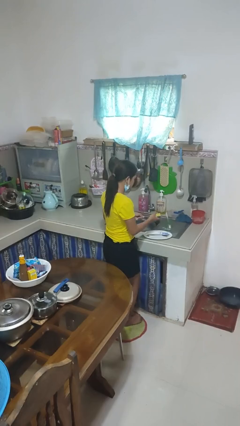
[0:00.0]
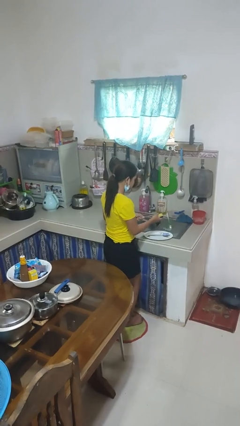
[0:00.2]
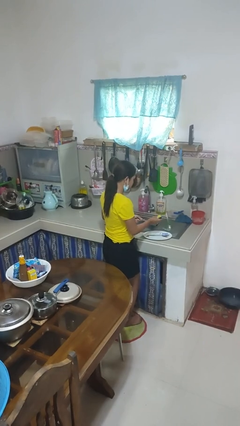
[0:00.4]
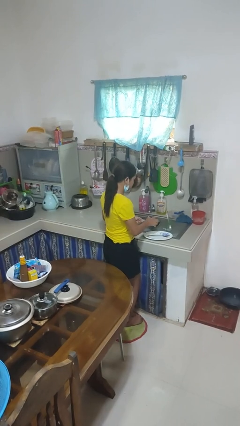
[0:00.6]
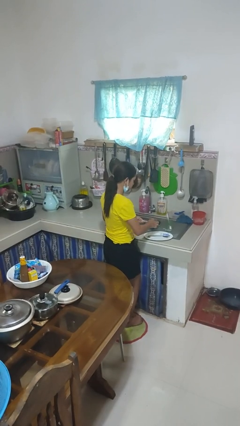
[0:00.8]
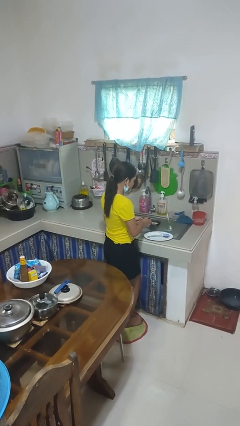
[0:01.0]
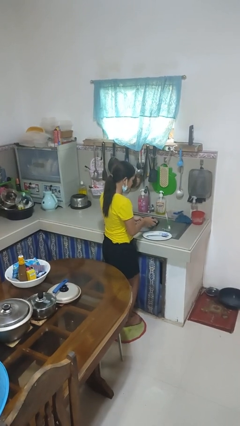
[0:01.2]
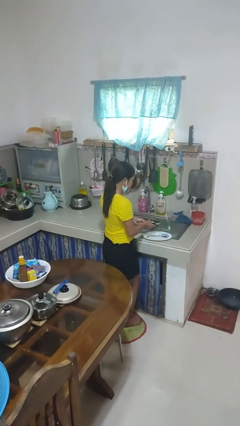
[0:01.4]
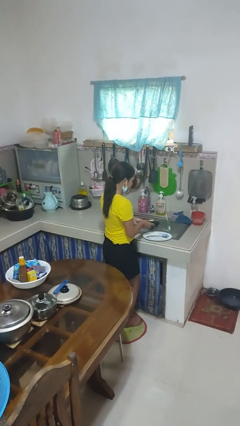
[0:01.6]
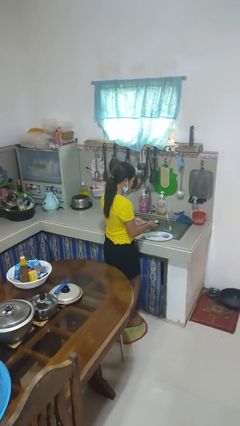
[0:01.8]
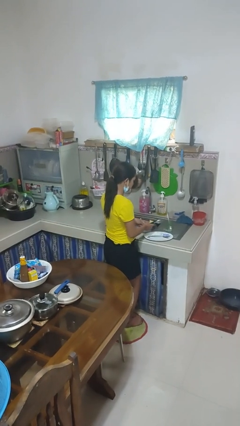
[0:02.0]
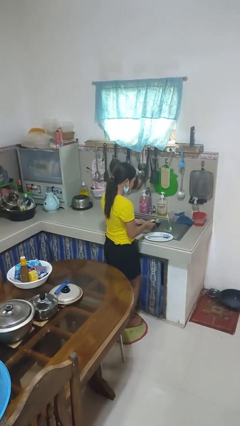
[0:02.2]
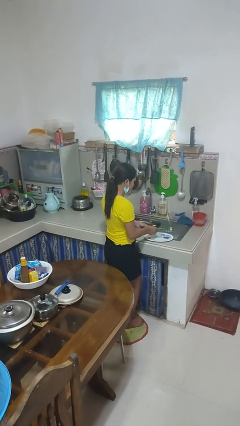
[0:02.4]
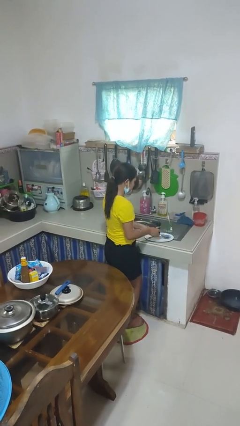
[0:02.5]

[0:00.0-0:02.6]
person washes dish

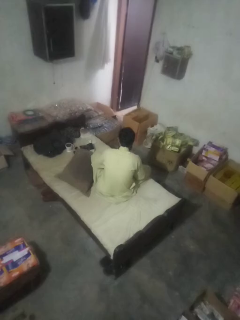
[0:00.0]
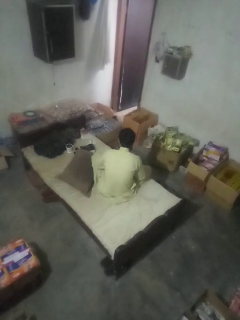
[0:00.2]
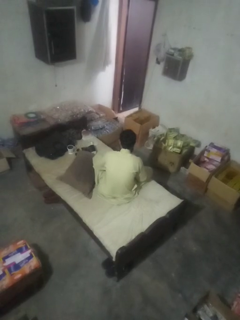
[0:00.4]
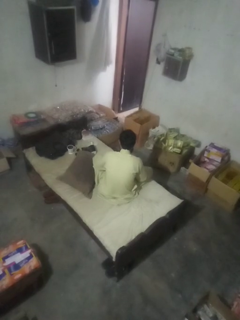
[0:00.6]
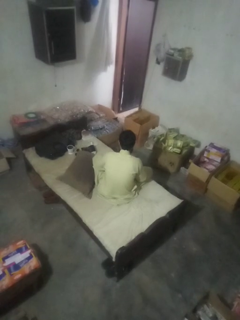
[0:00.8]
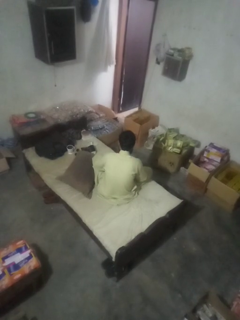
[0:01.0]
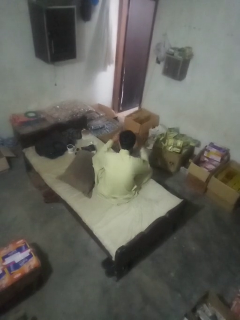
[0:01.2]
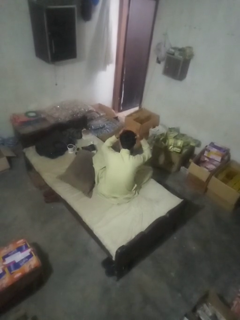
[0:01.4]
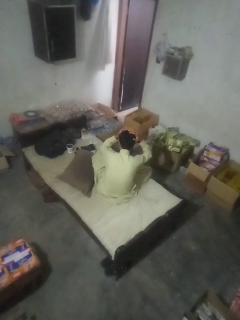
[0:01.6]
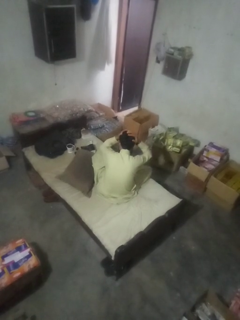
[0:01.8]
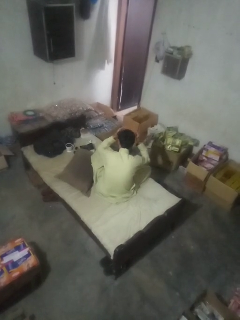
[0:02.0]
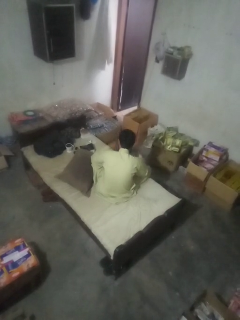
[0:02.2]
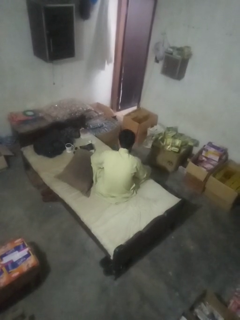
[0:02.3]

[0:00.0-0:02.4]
person pats head

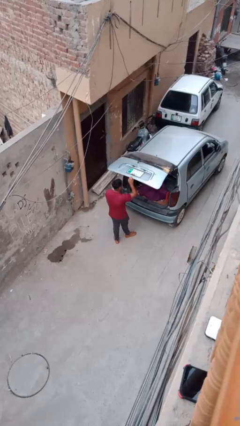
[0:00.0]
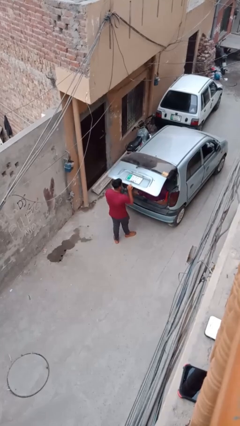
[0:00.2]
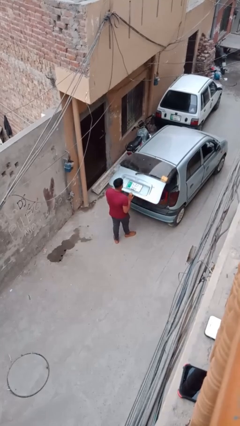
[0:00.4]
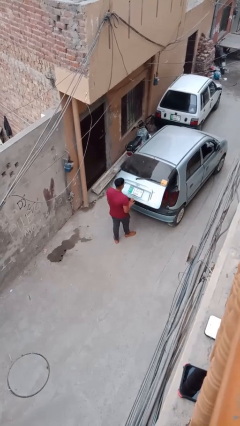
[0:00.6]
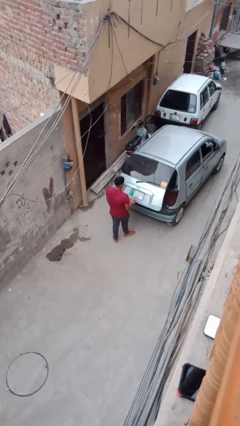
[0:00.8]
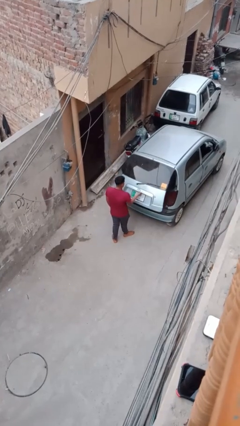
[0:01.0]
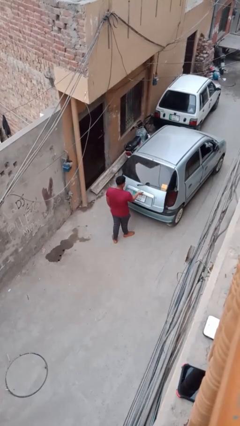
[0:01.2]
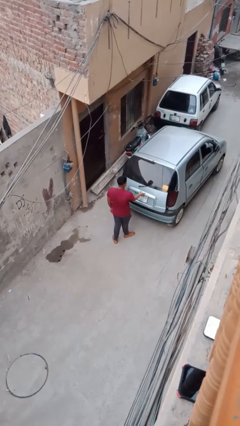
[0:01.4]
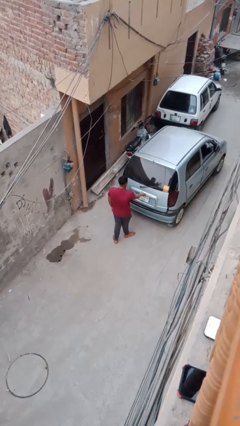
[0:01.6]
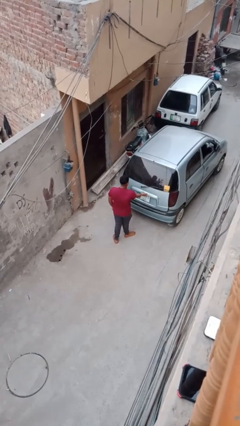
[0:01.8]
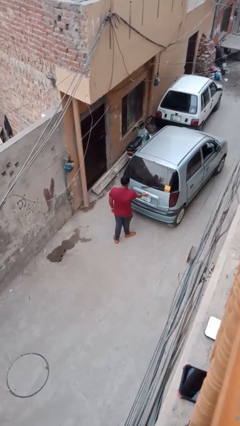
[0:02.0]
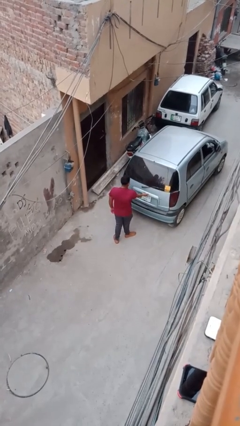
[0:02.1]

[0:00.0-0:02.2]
person closes car trunk

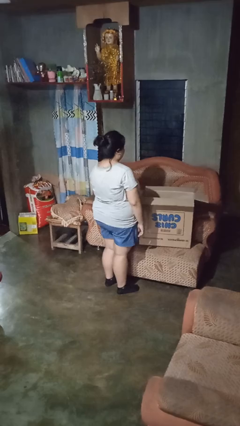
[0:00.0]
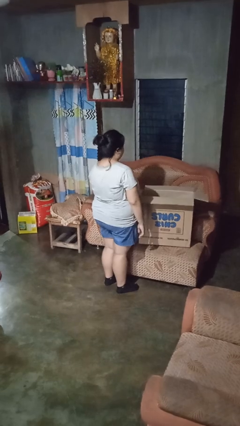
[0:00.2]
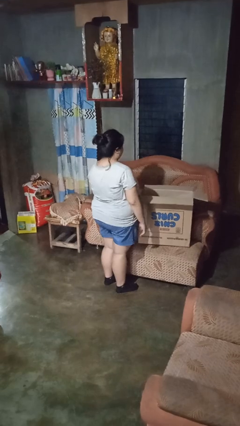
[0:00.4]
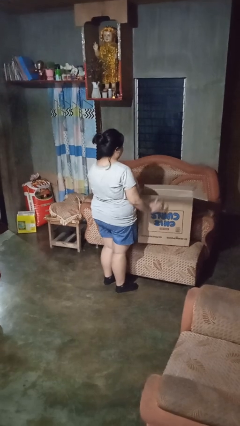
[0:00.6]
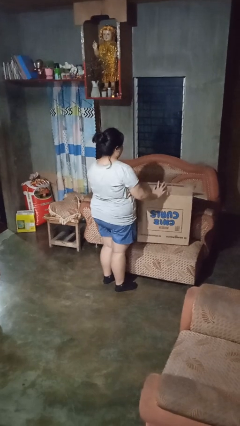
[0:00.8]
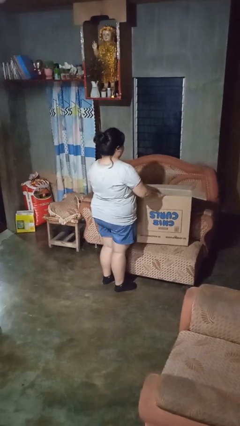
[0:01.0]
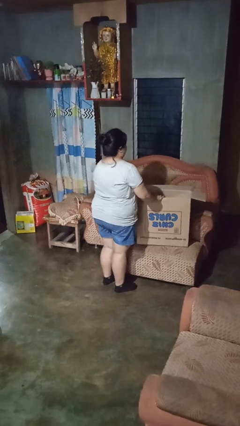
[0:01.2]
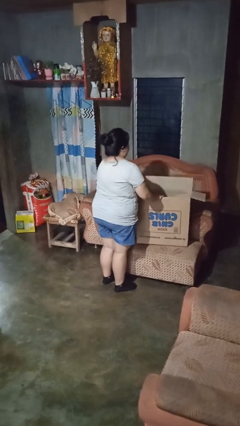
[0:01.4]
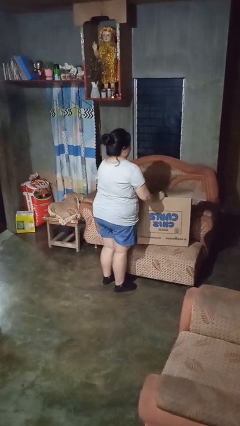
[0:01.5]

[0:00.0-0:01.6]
person closes box

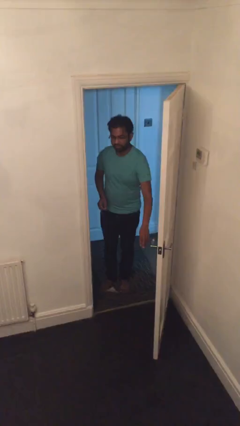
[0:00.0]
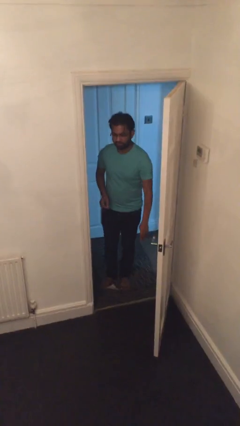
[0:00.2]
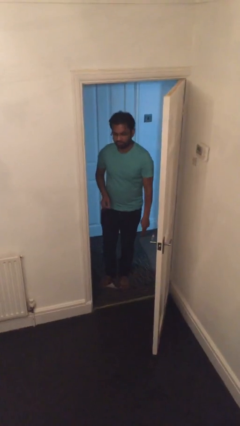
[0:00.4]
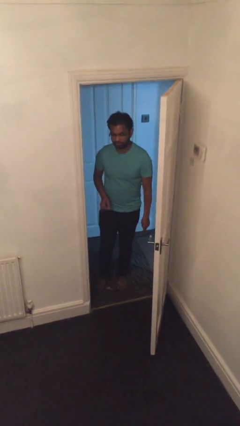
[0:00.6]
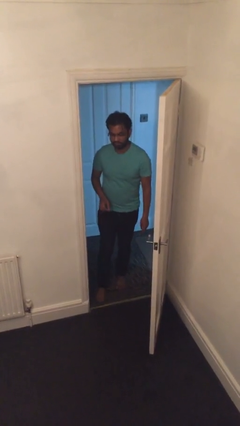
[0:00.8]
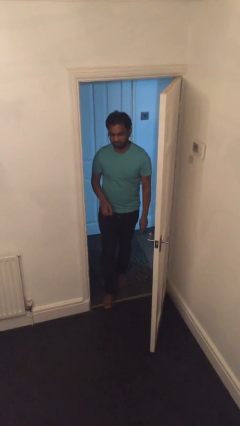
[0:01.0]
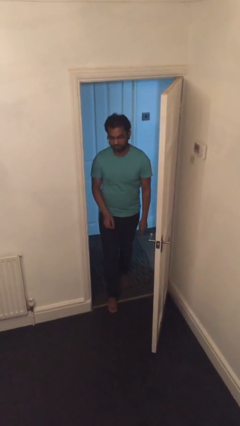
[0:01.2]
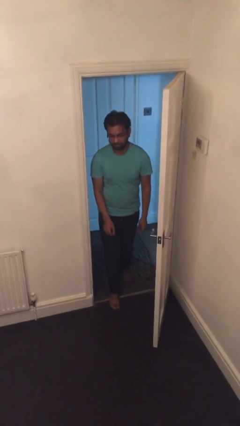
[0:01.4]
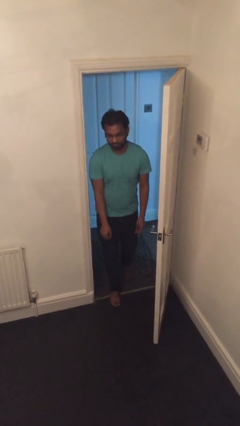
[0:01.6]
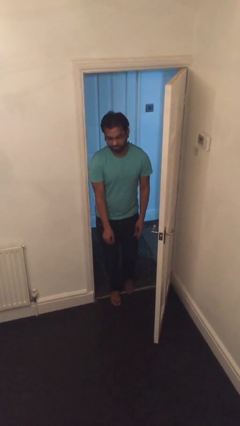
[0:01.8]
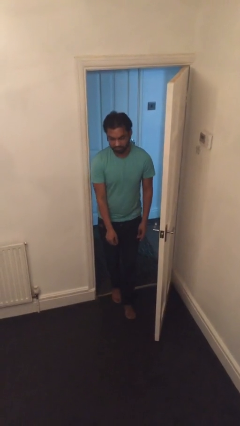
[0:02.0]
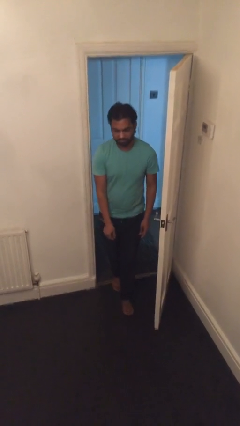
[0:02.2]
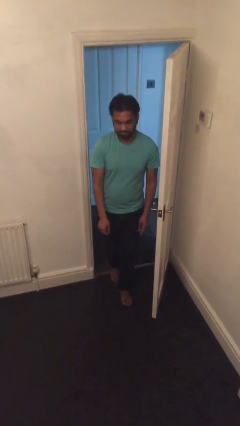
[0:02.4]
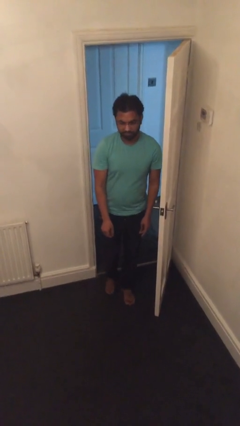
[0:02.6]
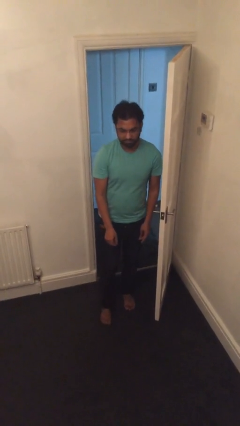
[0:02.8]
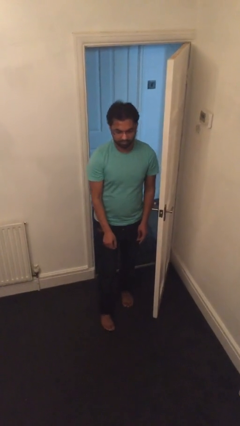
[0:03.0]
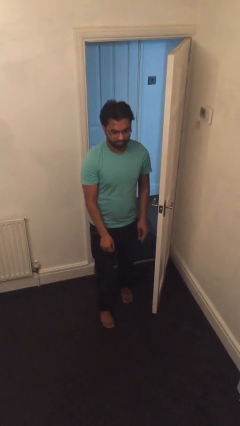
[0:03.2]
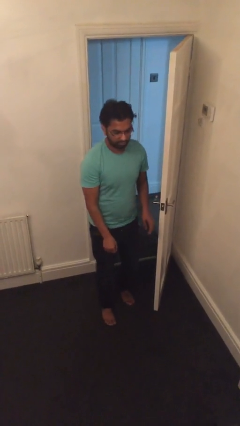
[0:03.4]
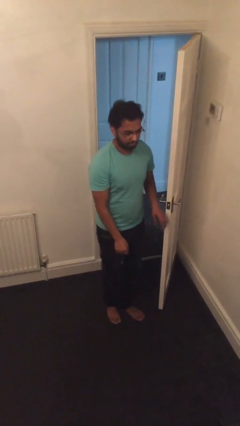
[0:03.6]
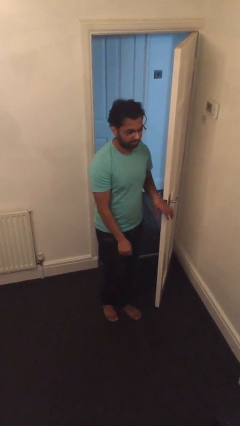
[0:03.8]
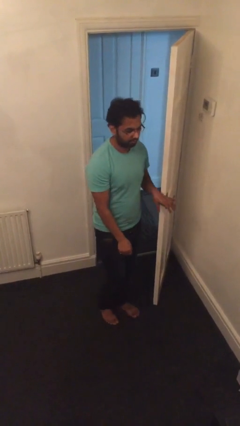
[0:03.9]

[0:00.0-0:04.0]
person enters scene through structure

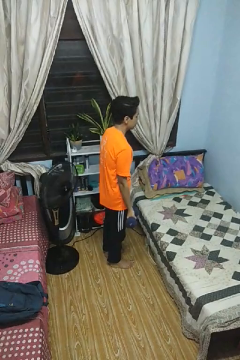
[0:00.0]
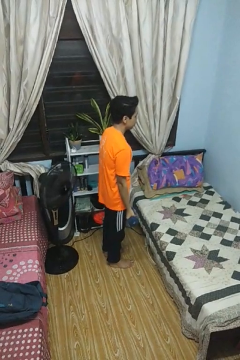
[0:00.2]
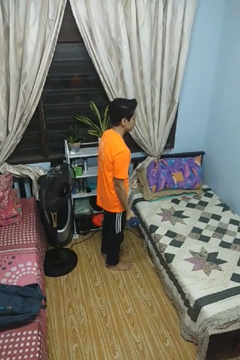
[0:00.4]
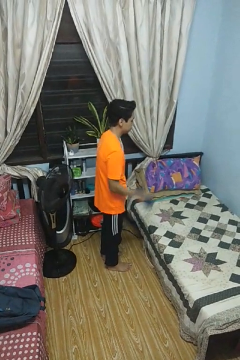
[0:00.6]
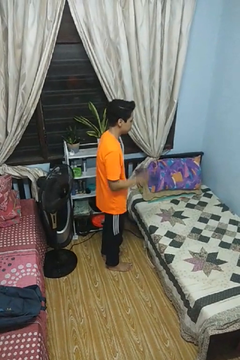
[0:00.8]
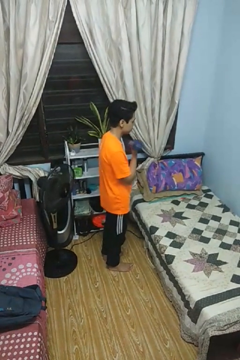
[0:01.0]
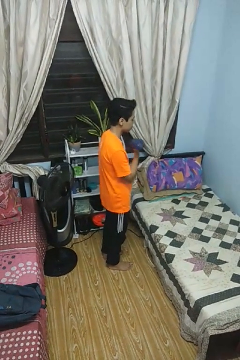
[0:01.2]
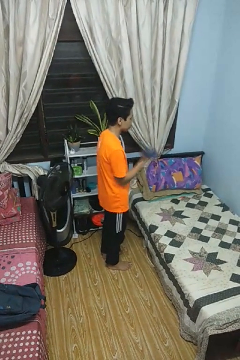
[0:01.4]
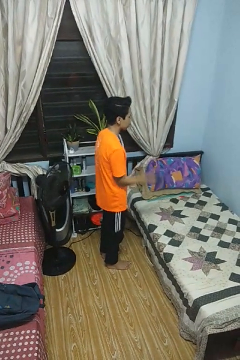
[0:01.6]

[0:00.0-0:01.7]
person lifts dumbbells

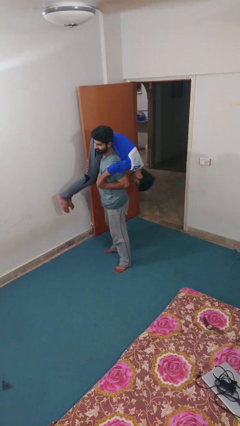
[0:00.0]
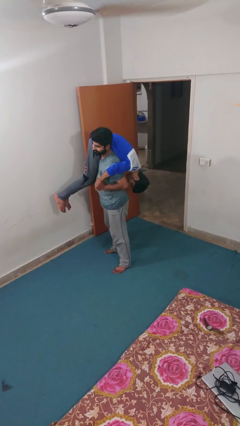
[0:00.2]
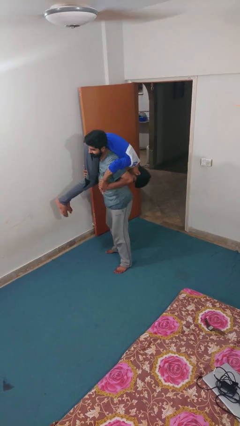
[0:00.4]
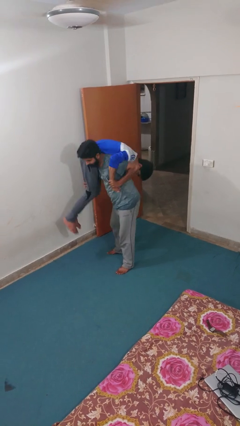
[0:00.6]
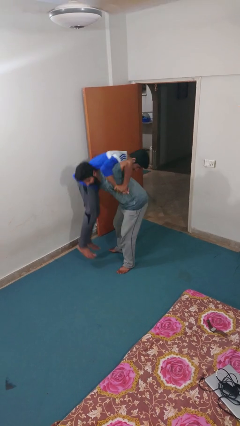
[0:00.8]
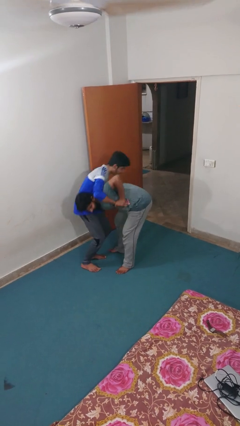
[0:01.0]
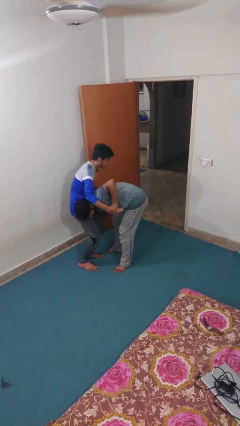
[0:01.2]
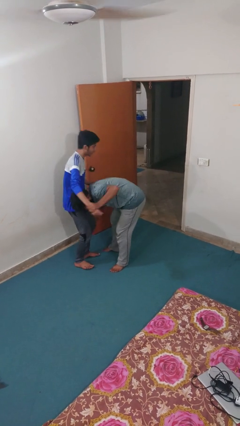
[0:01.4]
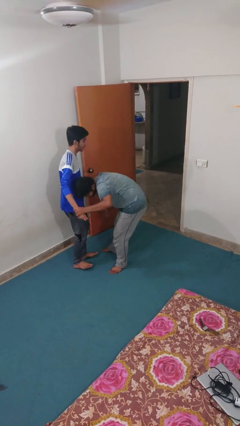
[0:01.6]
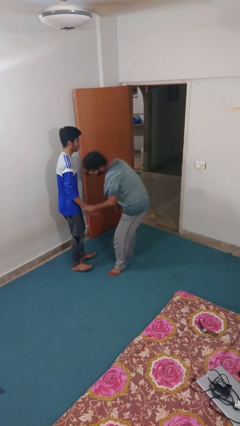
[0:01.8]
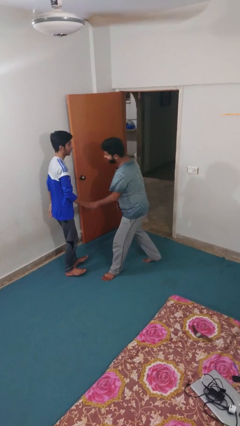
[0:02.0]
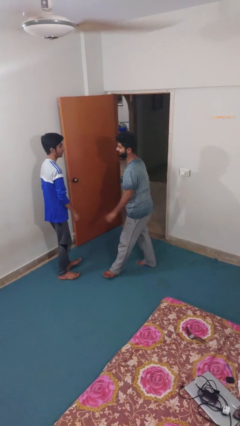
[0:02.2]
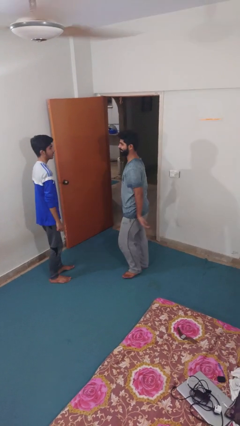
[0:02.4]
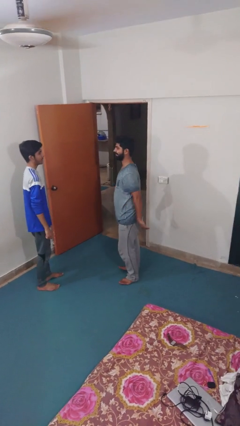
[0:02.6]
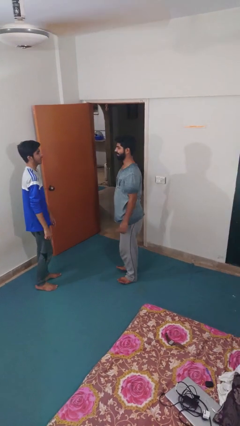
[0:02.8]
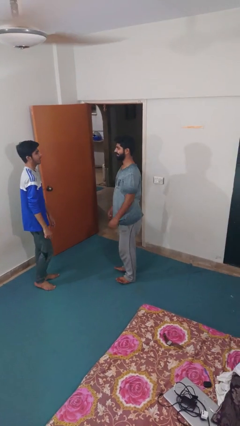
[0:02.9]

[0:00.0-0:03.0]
person puts down person

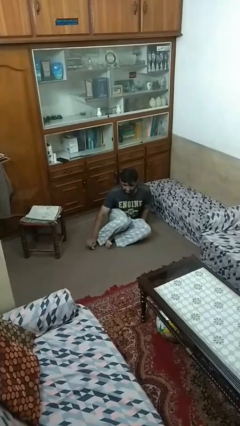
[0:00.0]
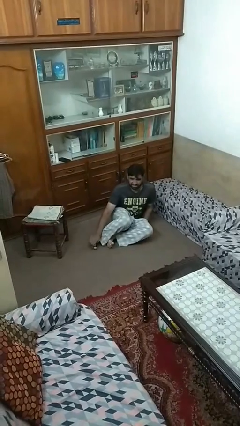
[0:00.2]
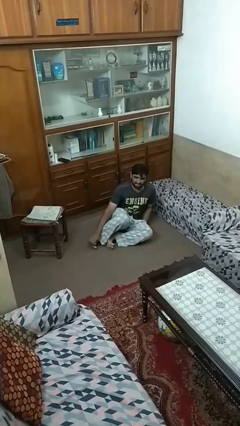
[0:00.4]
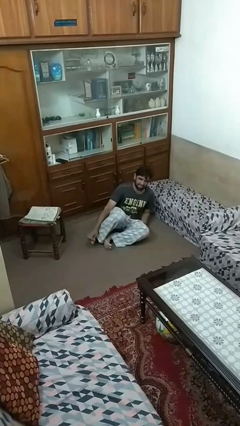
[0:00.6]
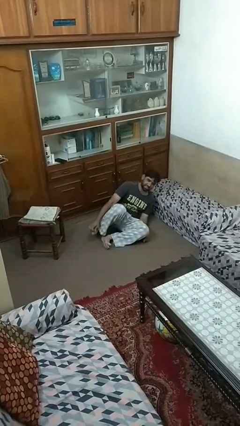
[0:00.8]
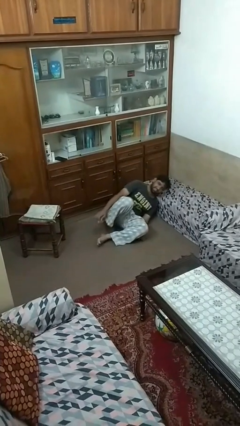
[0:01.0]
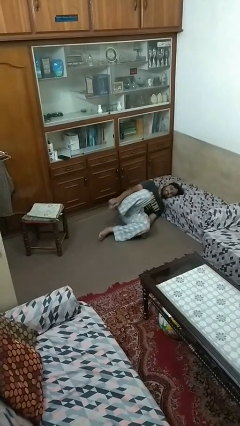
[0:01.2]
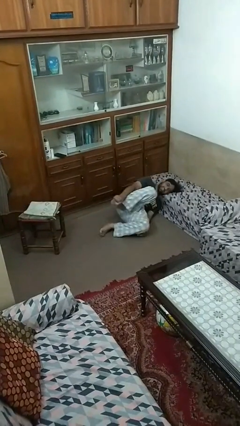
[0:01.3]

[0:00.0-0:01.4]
person lies down on floor
